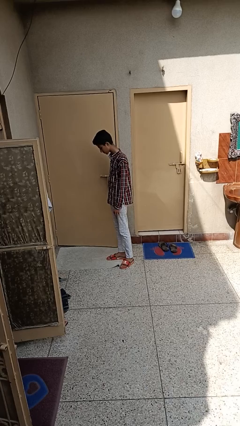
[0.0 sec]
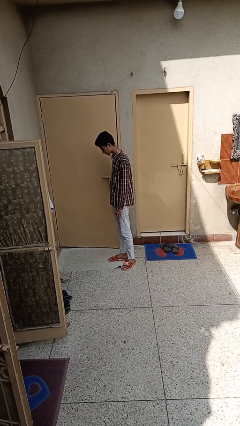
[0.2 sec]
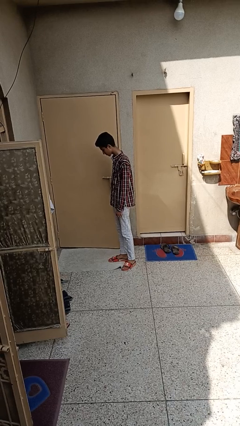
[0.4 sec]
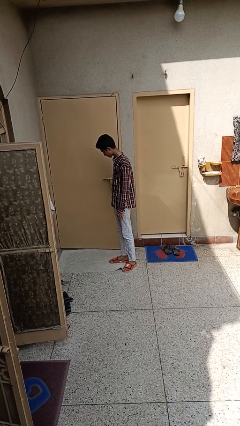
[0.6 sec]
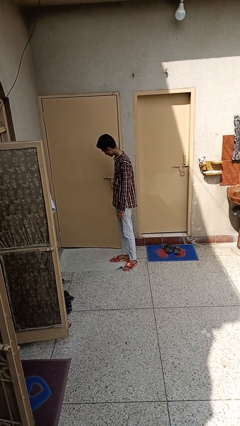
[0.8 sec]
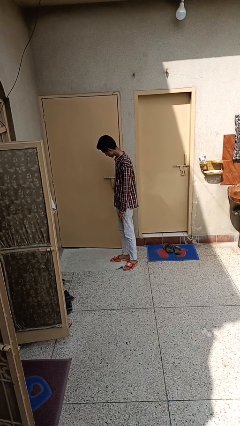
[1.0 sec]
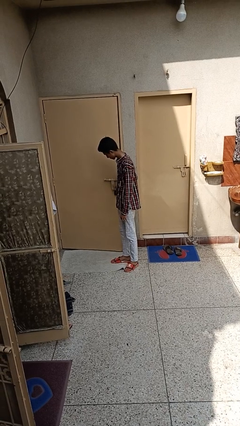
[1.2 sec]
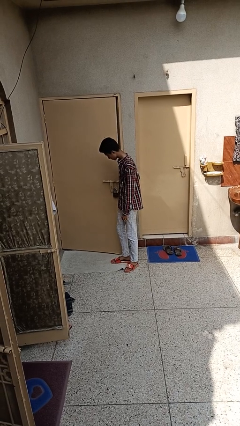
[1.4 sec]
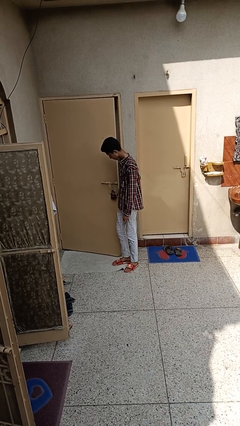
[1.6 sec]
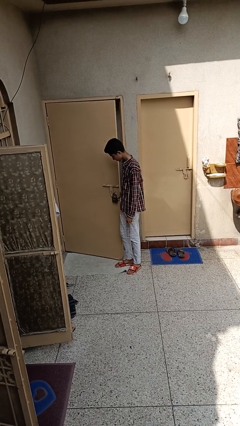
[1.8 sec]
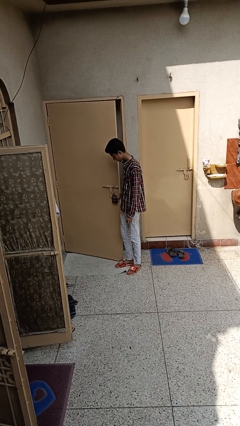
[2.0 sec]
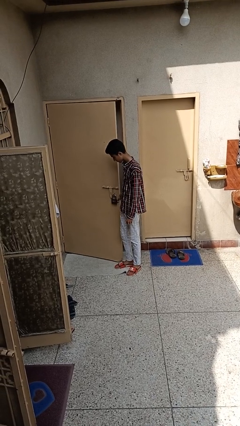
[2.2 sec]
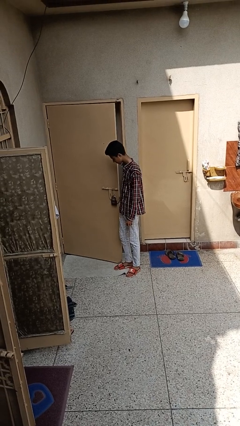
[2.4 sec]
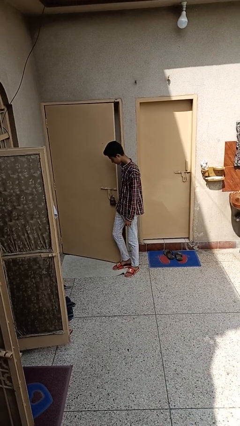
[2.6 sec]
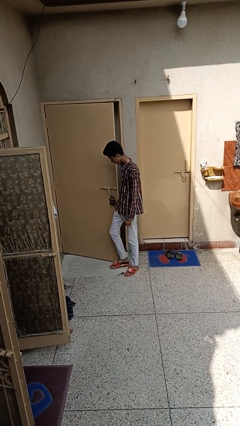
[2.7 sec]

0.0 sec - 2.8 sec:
person opens facility door

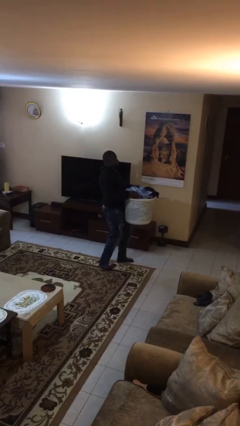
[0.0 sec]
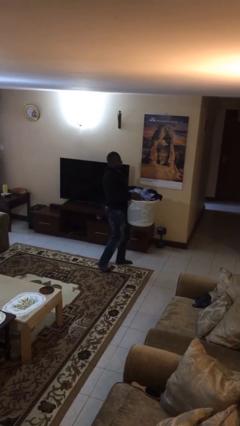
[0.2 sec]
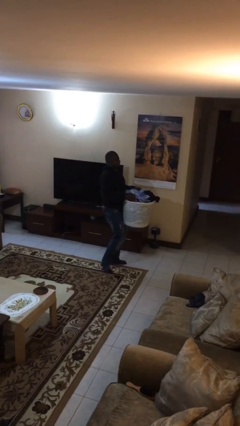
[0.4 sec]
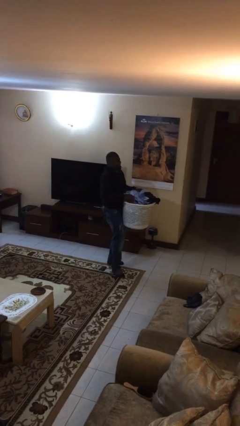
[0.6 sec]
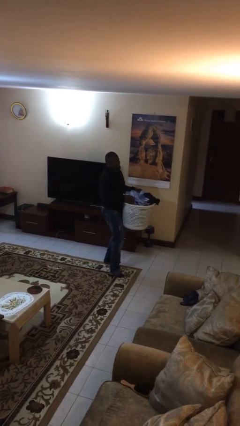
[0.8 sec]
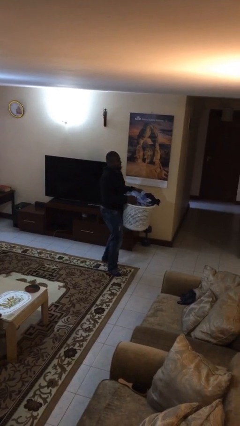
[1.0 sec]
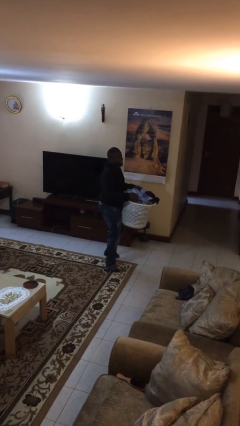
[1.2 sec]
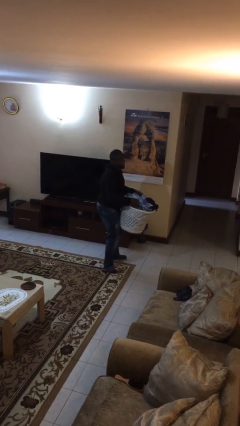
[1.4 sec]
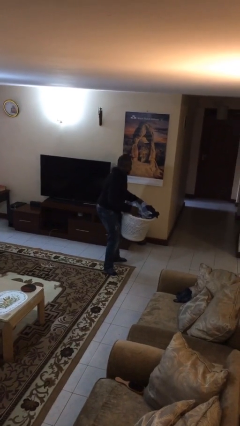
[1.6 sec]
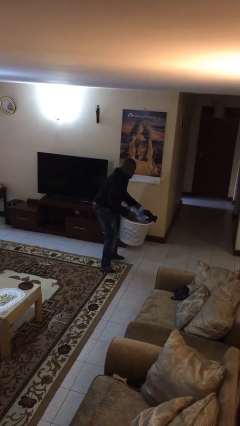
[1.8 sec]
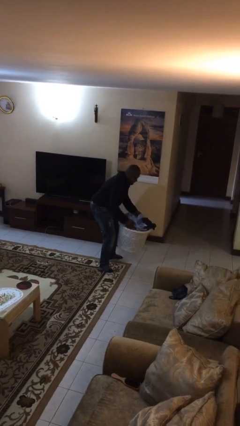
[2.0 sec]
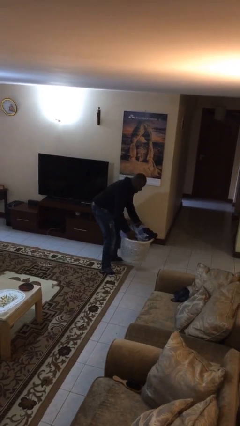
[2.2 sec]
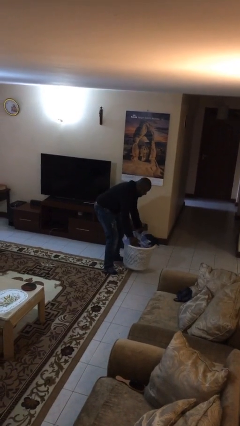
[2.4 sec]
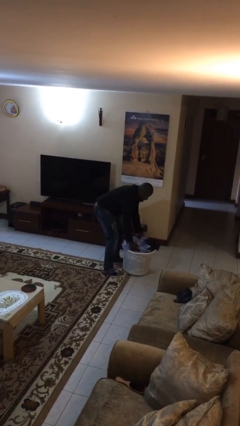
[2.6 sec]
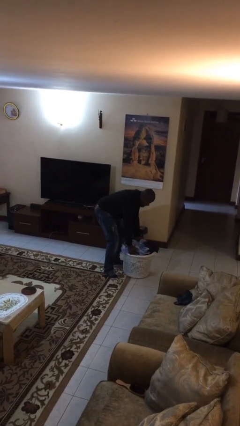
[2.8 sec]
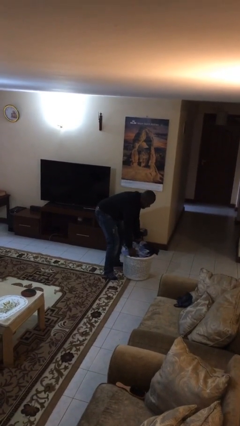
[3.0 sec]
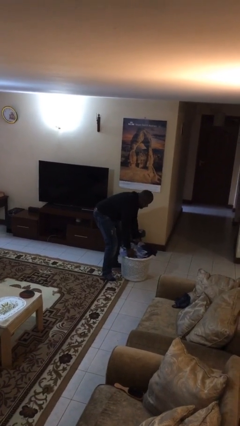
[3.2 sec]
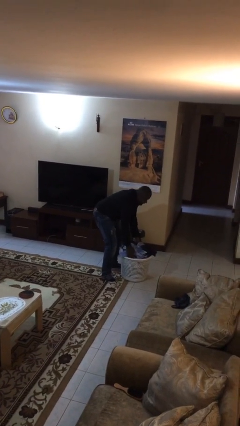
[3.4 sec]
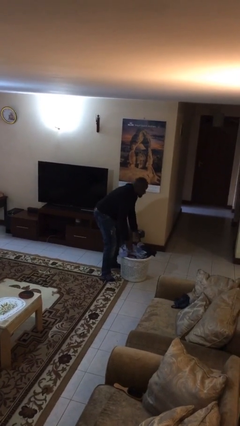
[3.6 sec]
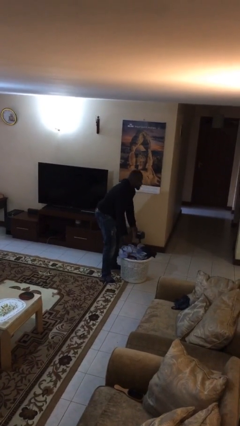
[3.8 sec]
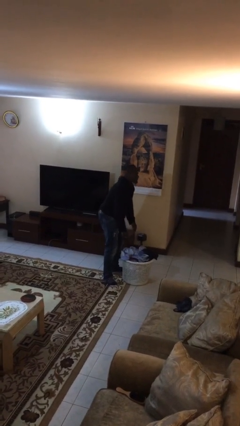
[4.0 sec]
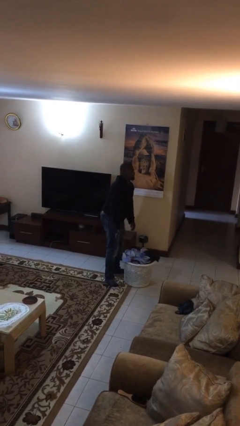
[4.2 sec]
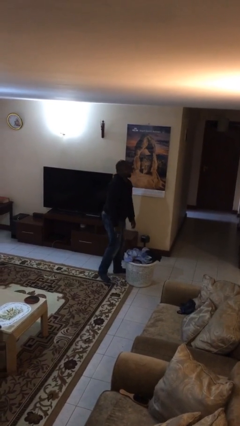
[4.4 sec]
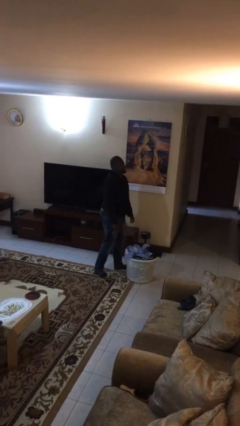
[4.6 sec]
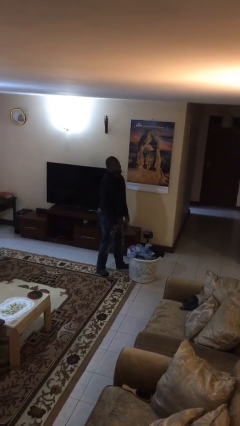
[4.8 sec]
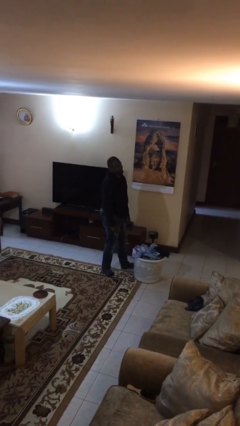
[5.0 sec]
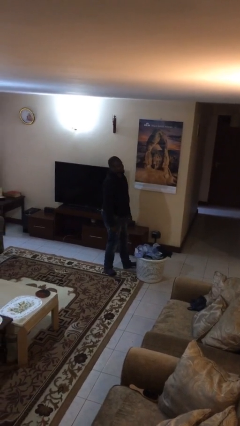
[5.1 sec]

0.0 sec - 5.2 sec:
person puts down object on floor

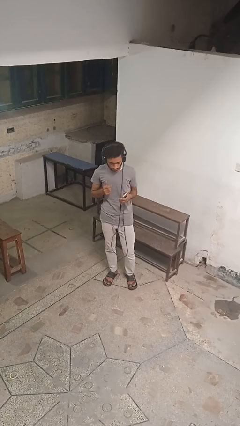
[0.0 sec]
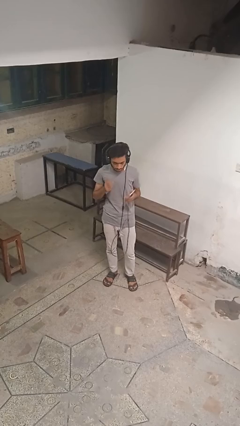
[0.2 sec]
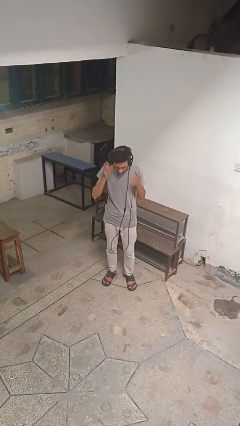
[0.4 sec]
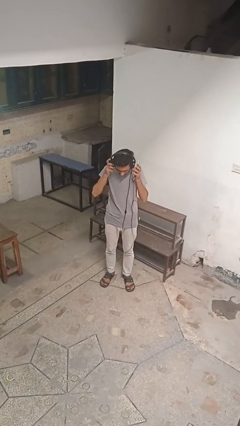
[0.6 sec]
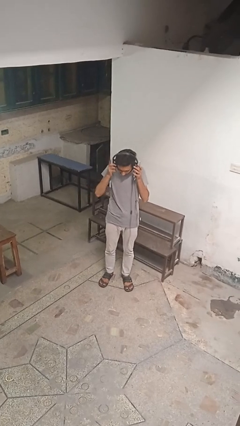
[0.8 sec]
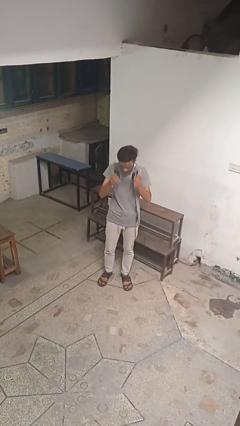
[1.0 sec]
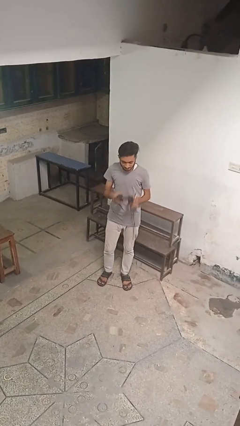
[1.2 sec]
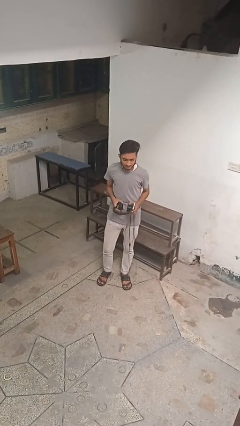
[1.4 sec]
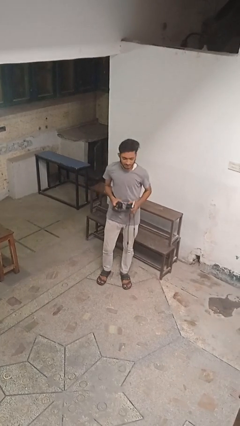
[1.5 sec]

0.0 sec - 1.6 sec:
person takes off headphones

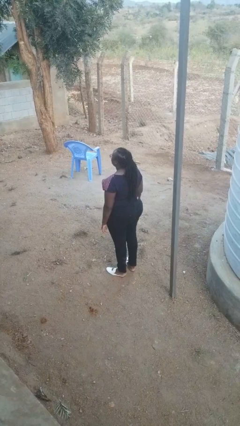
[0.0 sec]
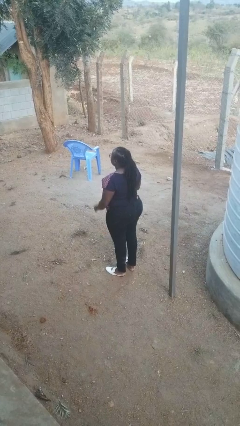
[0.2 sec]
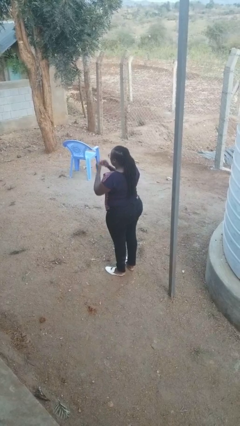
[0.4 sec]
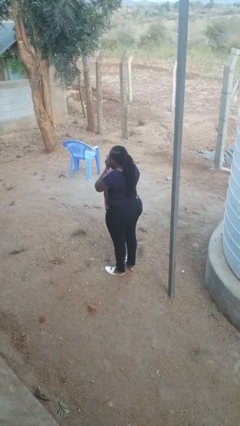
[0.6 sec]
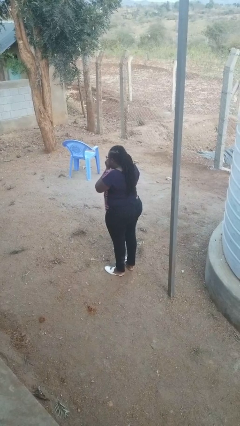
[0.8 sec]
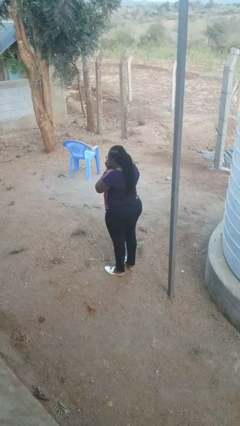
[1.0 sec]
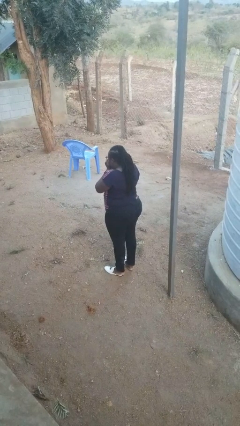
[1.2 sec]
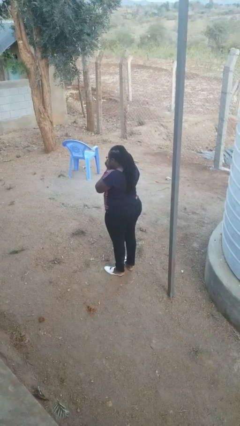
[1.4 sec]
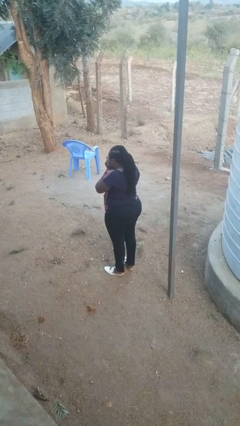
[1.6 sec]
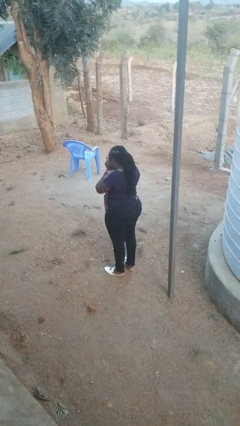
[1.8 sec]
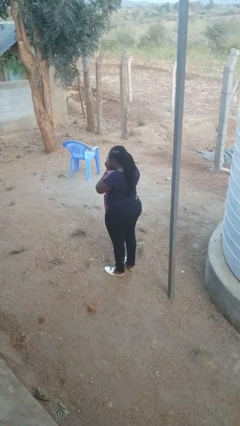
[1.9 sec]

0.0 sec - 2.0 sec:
person sneezes into hand

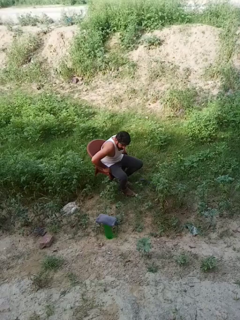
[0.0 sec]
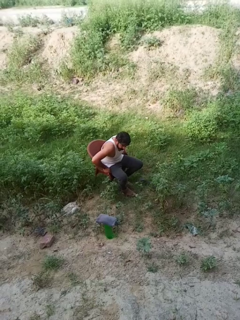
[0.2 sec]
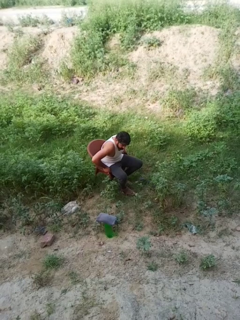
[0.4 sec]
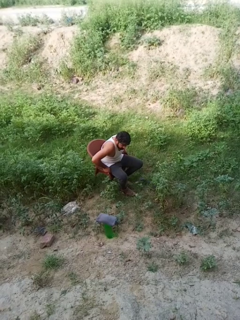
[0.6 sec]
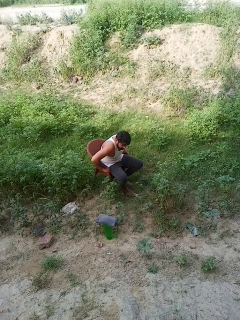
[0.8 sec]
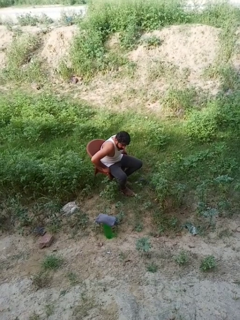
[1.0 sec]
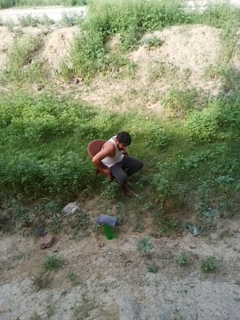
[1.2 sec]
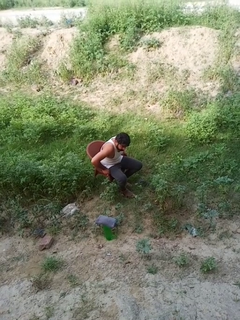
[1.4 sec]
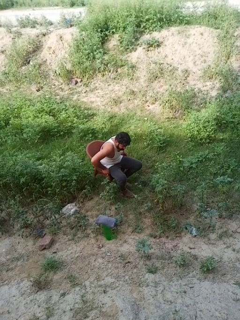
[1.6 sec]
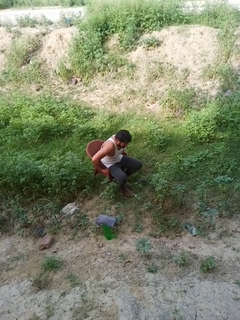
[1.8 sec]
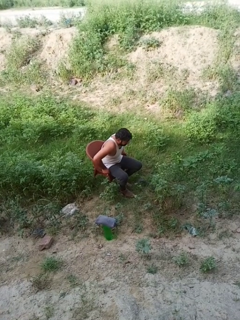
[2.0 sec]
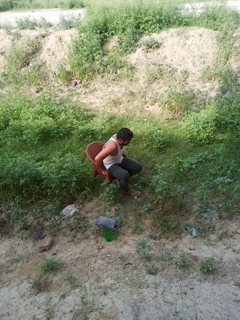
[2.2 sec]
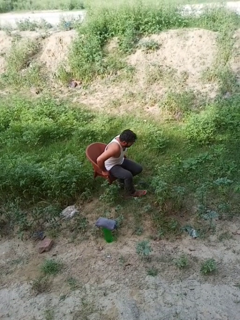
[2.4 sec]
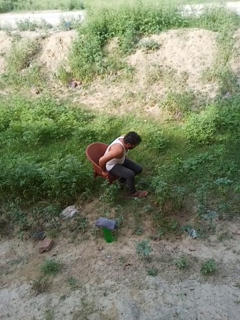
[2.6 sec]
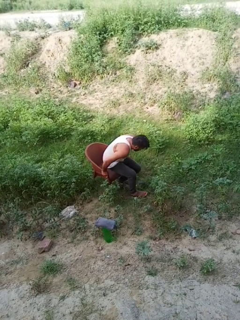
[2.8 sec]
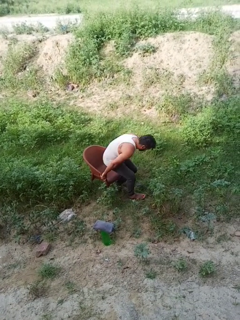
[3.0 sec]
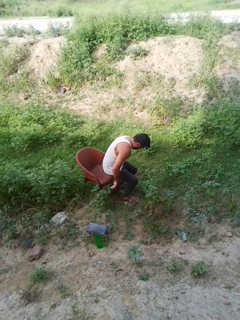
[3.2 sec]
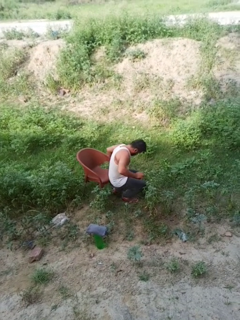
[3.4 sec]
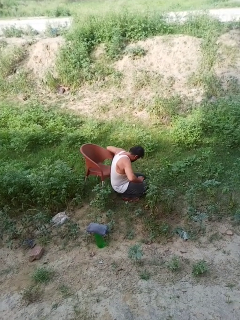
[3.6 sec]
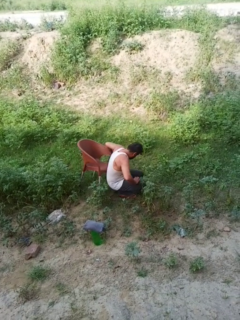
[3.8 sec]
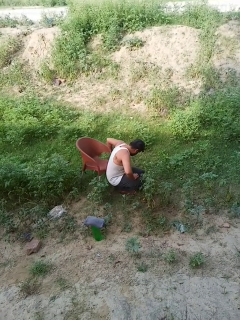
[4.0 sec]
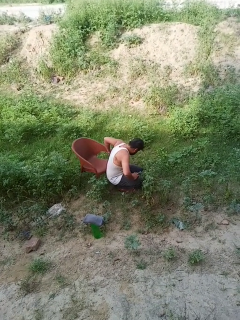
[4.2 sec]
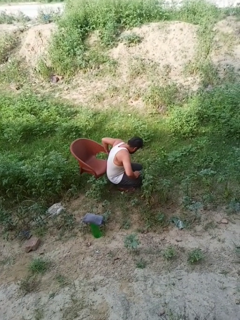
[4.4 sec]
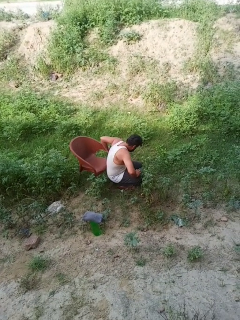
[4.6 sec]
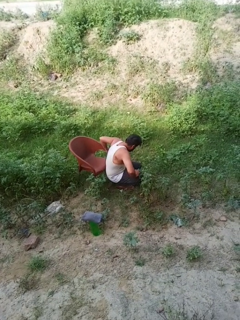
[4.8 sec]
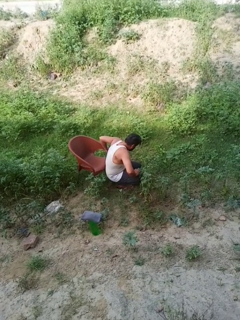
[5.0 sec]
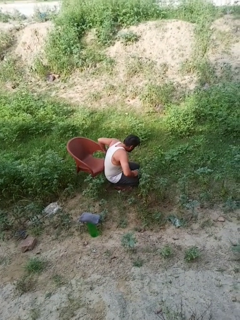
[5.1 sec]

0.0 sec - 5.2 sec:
person falls from chair

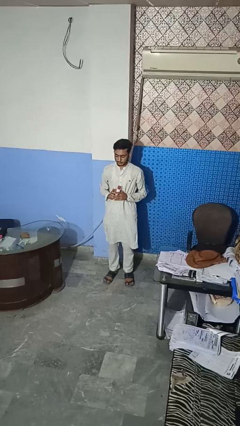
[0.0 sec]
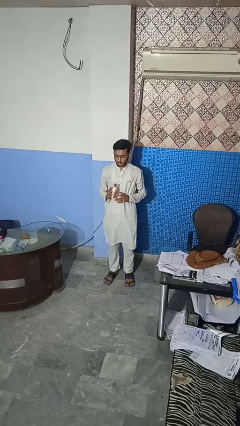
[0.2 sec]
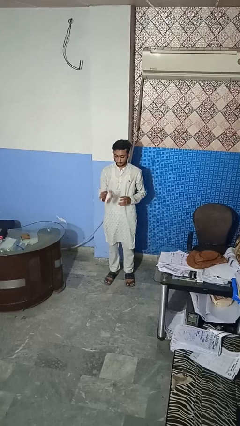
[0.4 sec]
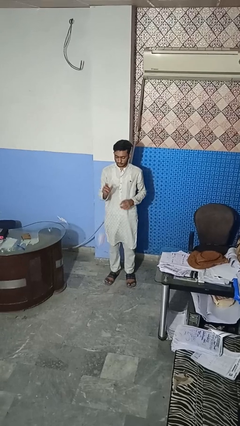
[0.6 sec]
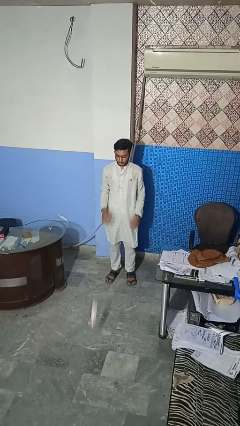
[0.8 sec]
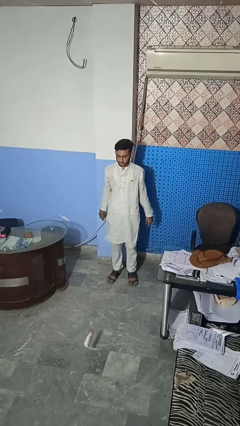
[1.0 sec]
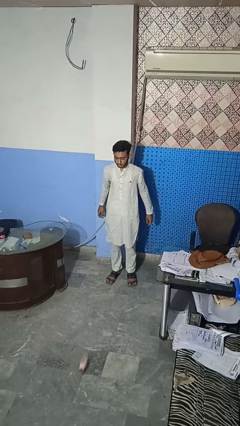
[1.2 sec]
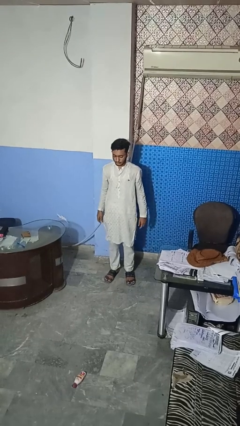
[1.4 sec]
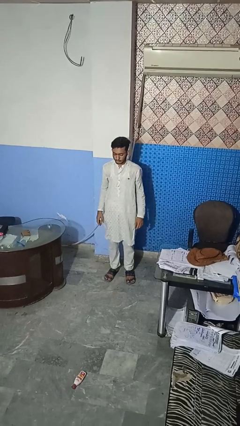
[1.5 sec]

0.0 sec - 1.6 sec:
person throws object to ground

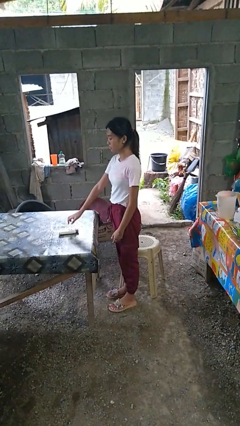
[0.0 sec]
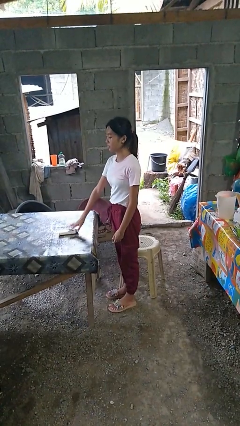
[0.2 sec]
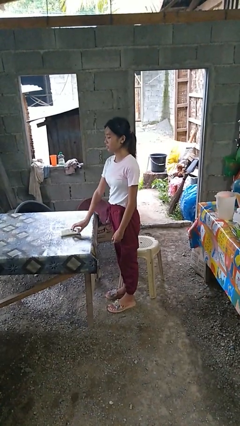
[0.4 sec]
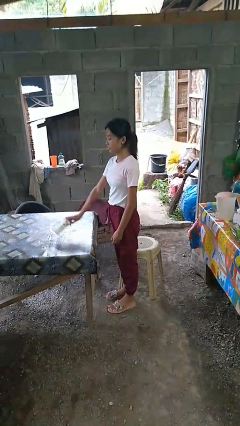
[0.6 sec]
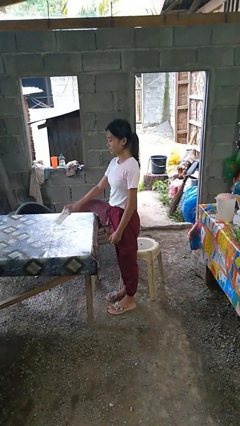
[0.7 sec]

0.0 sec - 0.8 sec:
person picks up object from table
